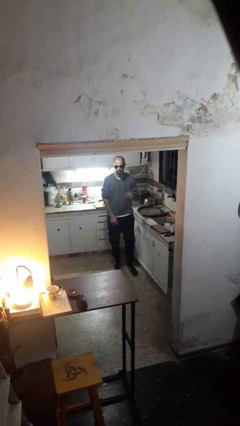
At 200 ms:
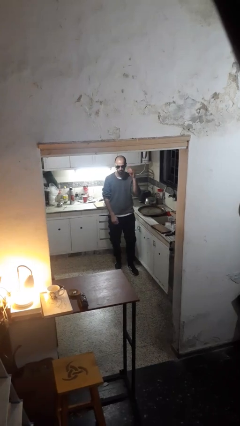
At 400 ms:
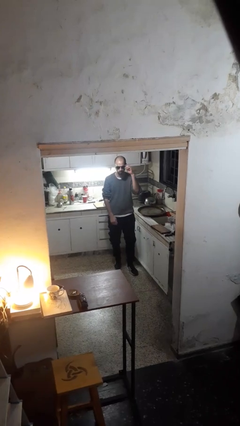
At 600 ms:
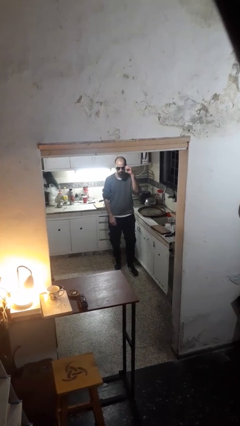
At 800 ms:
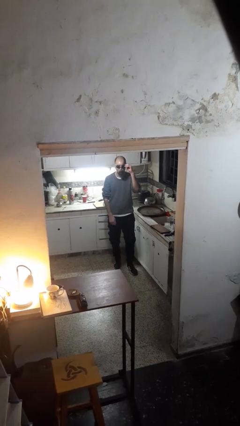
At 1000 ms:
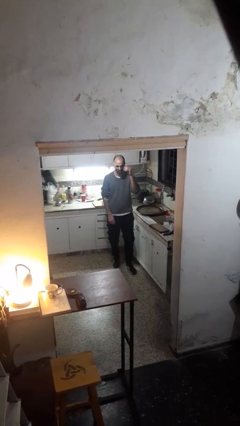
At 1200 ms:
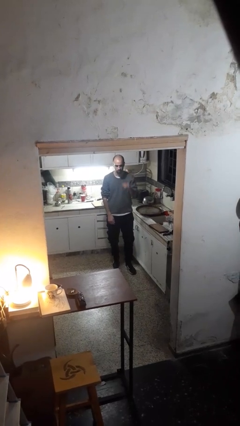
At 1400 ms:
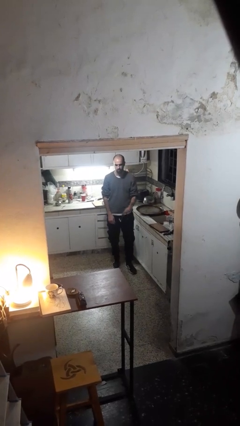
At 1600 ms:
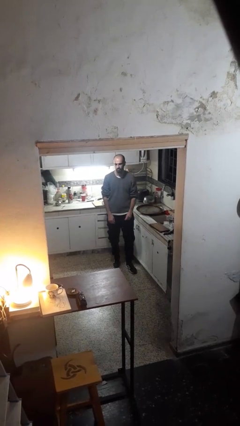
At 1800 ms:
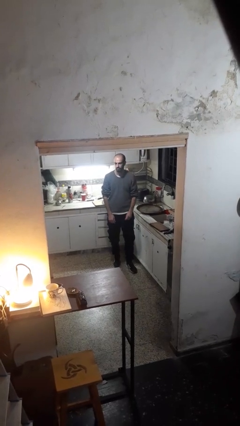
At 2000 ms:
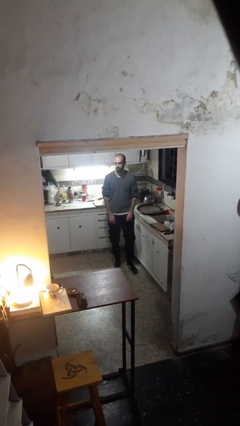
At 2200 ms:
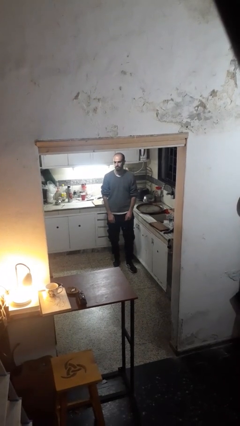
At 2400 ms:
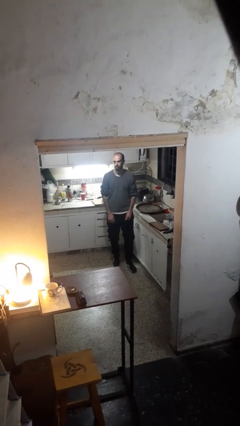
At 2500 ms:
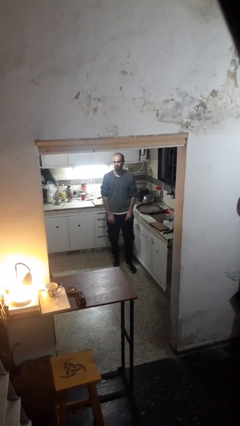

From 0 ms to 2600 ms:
person takes off sunglasses

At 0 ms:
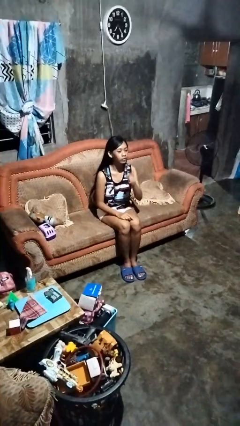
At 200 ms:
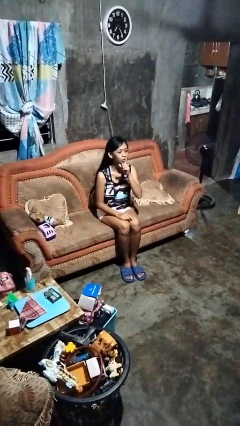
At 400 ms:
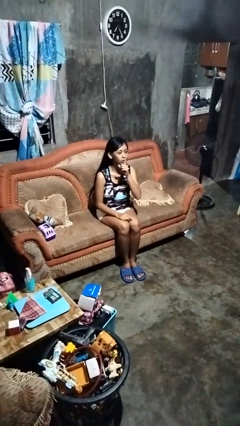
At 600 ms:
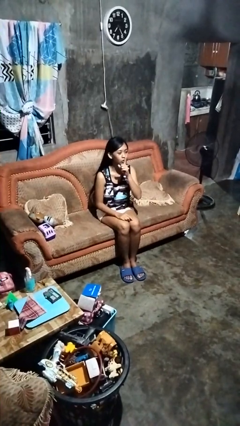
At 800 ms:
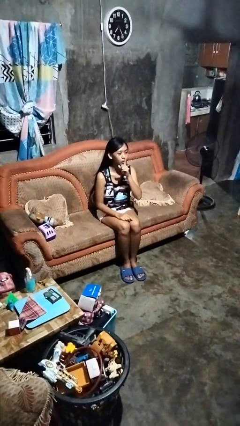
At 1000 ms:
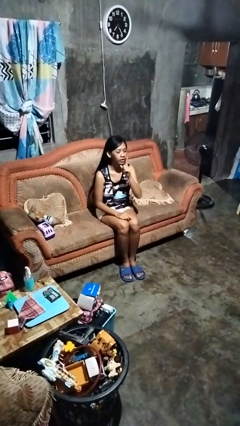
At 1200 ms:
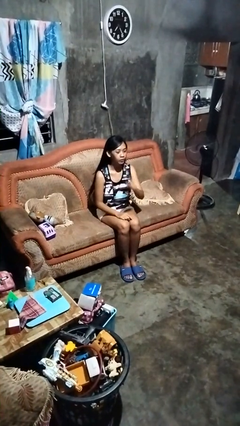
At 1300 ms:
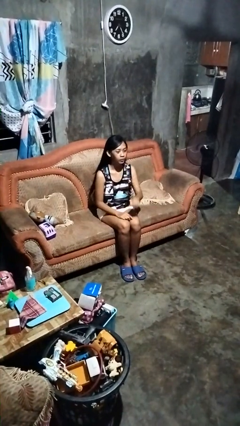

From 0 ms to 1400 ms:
person gestures be quiet

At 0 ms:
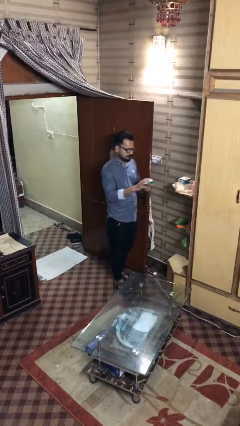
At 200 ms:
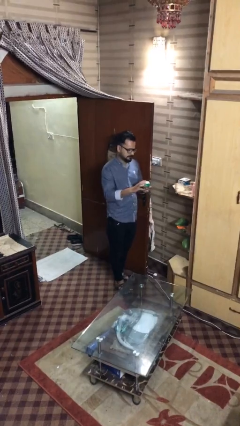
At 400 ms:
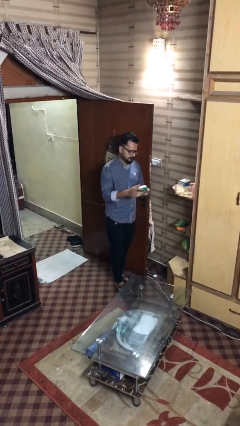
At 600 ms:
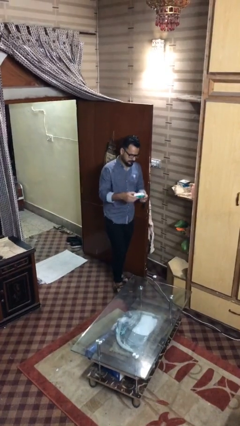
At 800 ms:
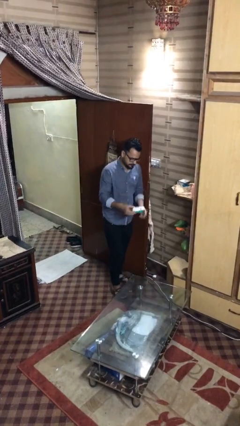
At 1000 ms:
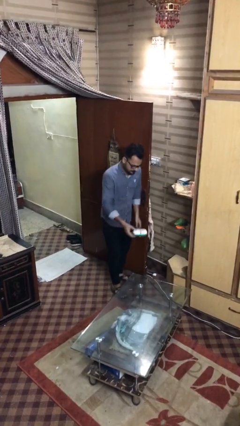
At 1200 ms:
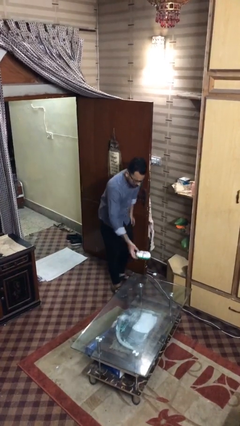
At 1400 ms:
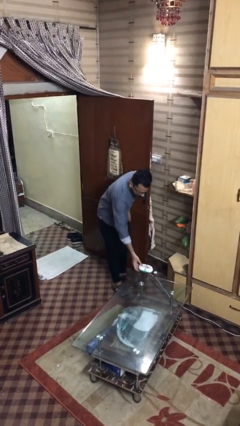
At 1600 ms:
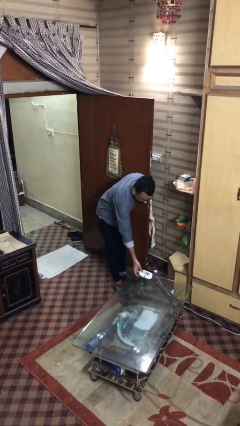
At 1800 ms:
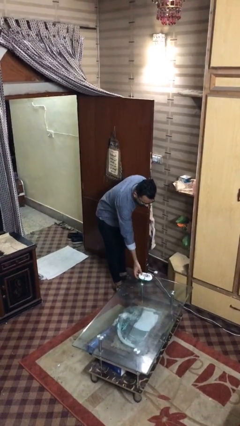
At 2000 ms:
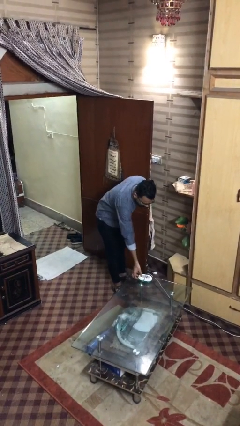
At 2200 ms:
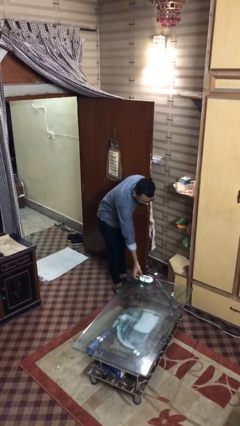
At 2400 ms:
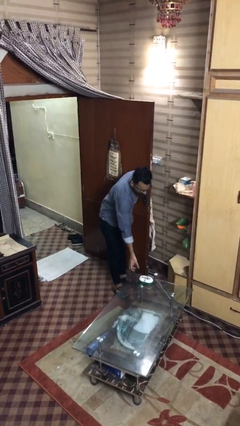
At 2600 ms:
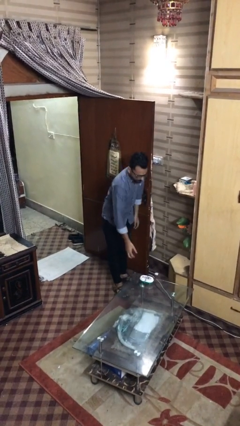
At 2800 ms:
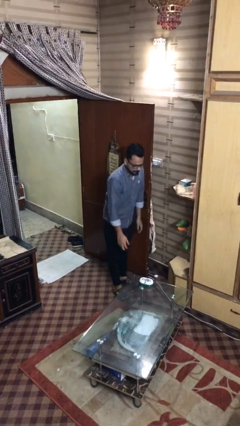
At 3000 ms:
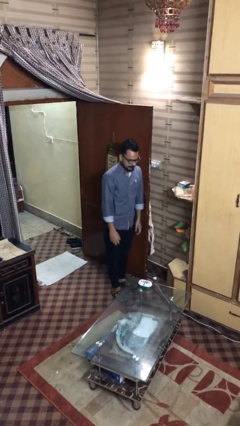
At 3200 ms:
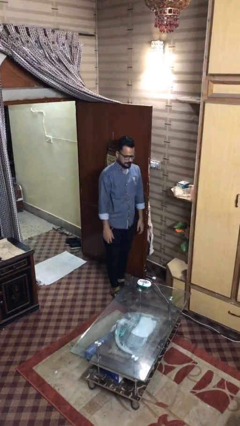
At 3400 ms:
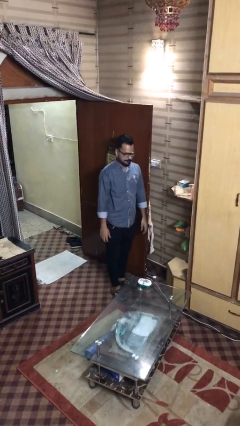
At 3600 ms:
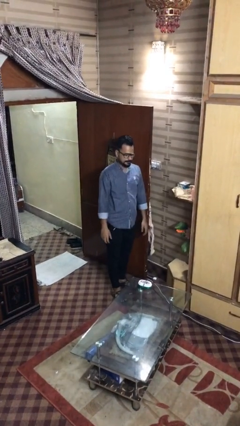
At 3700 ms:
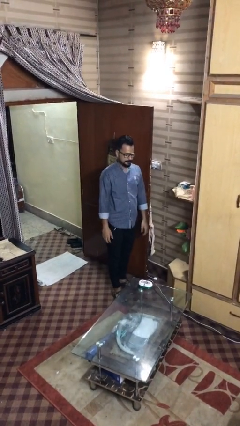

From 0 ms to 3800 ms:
person puts down object on table

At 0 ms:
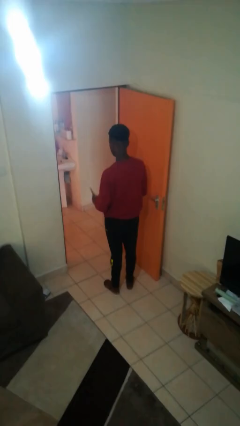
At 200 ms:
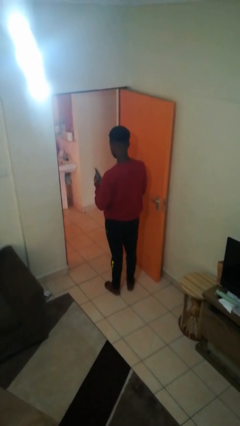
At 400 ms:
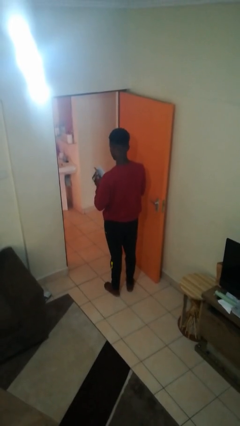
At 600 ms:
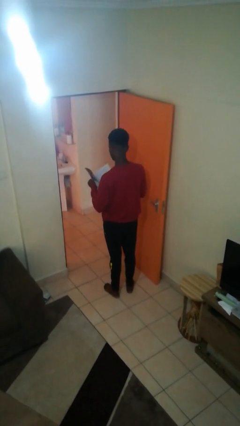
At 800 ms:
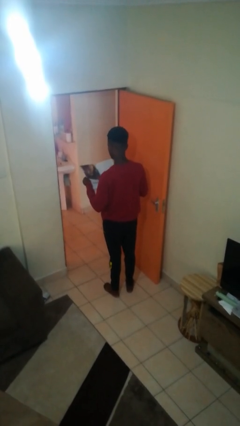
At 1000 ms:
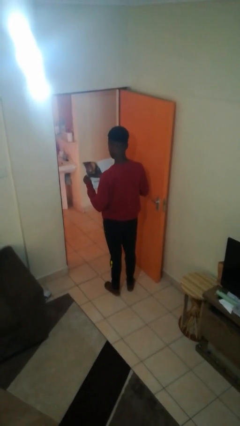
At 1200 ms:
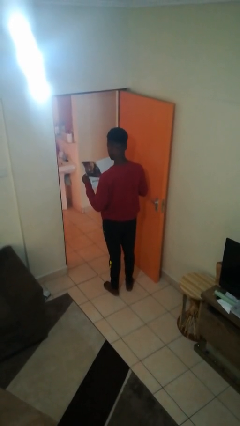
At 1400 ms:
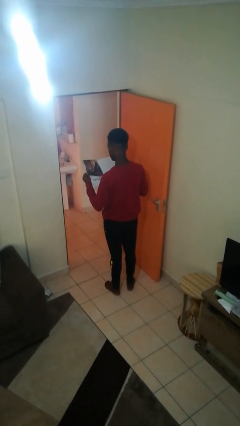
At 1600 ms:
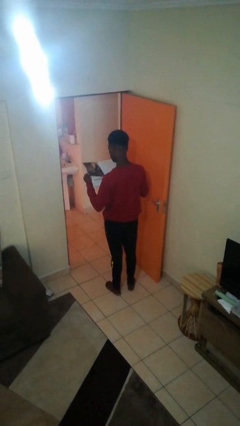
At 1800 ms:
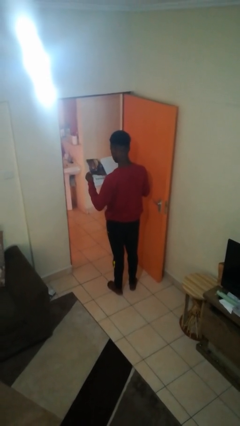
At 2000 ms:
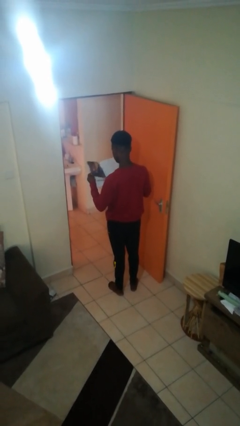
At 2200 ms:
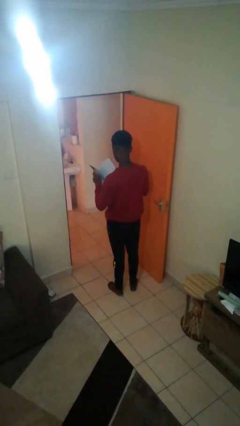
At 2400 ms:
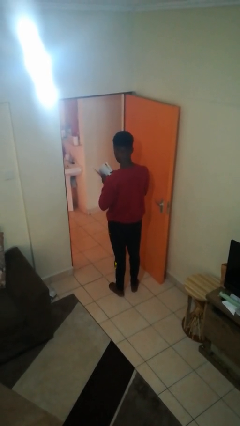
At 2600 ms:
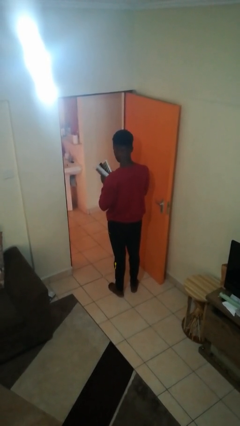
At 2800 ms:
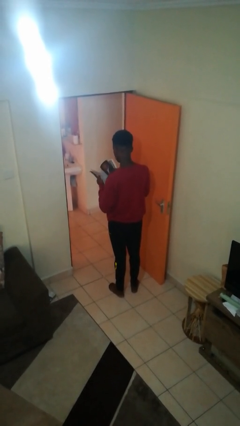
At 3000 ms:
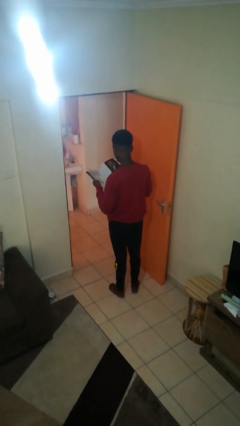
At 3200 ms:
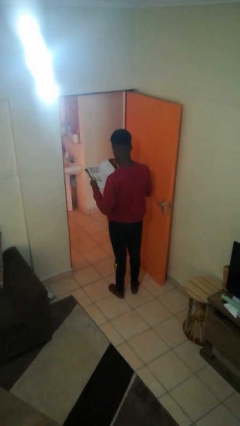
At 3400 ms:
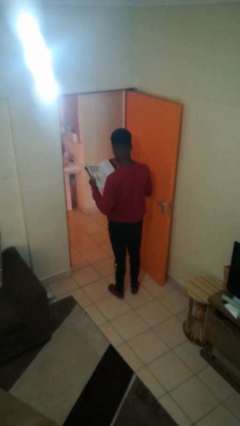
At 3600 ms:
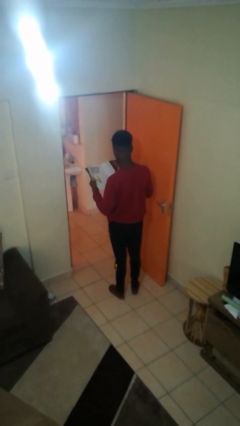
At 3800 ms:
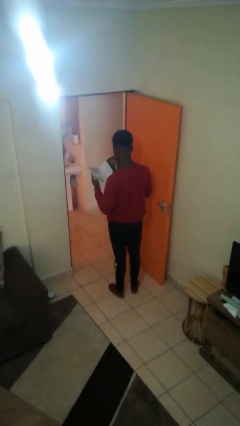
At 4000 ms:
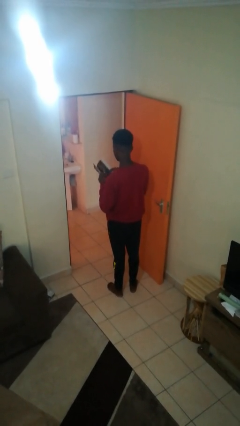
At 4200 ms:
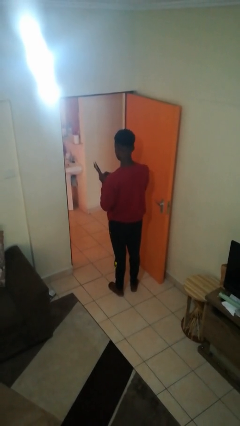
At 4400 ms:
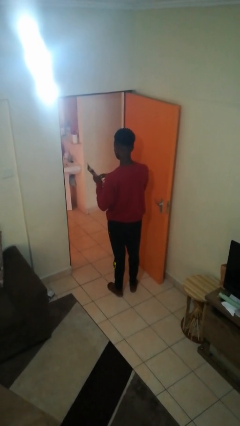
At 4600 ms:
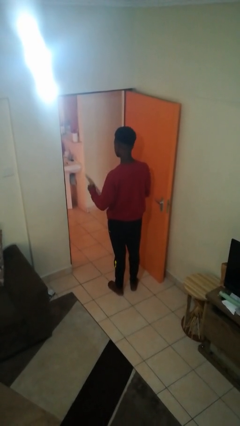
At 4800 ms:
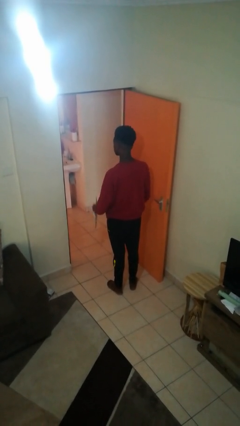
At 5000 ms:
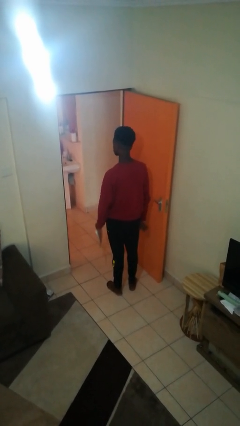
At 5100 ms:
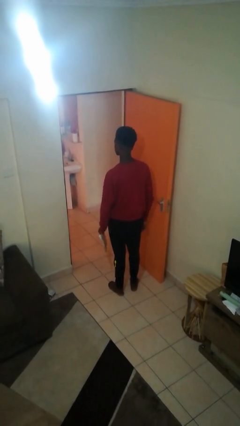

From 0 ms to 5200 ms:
person reads magazine

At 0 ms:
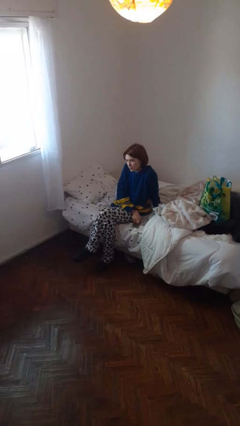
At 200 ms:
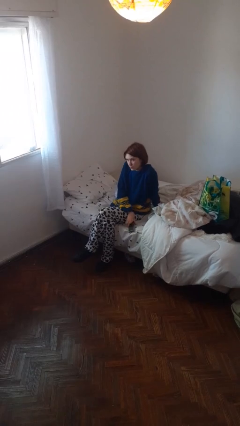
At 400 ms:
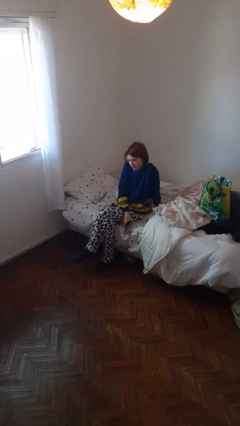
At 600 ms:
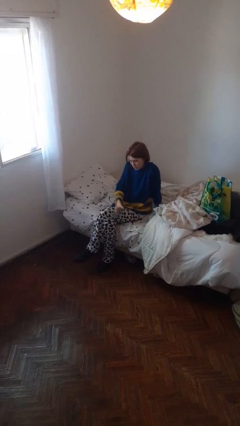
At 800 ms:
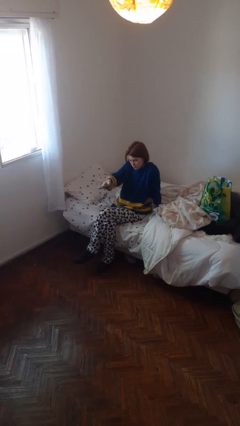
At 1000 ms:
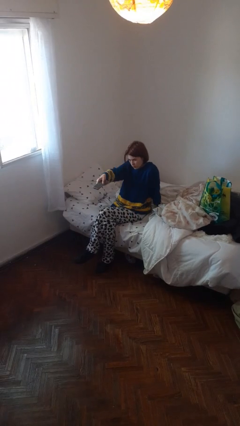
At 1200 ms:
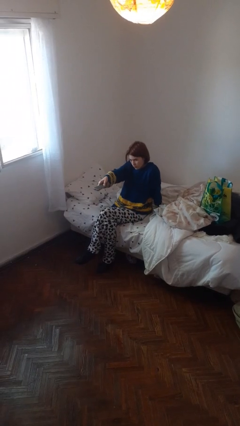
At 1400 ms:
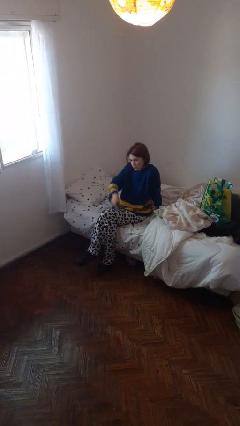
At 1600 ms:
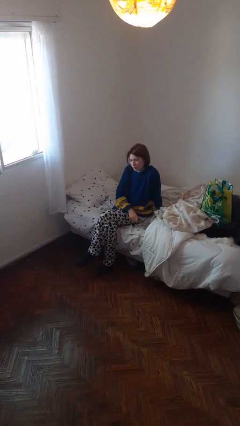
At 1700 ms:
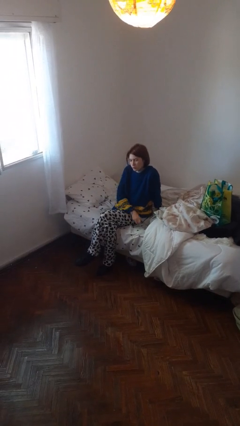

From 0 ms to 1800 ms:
person uses television remote

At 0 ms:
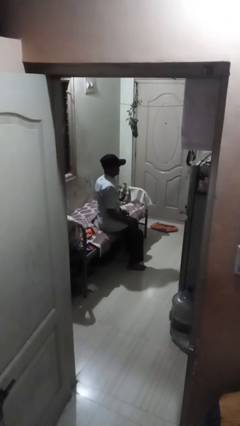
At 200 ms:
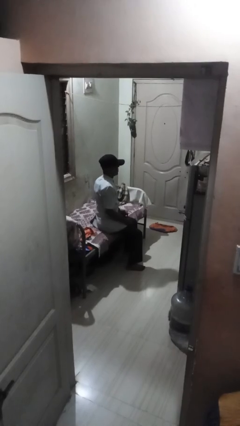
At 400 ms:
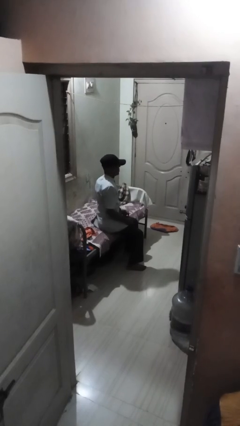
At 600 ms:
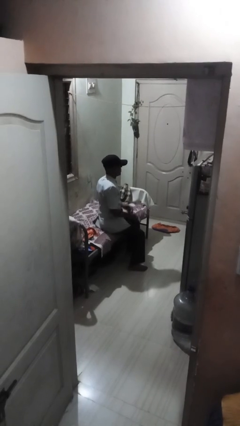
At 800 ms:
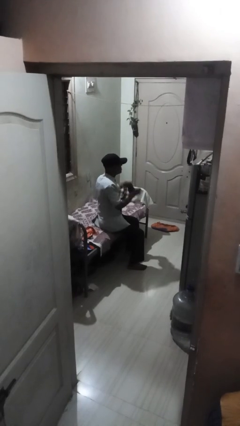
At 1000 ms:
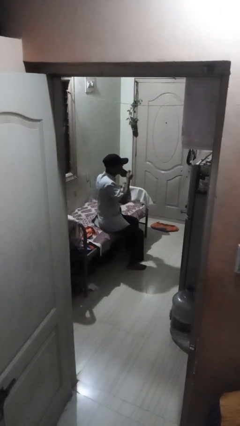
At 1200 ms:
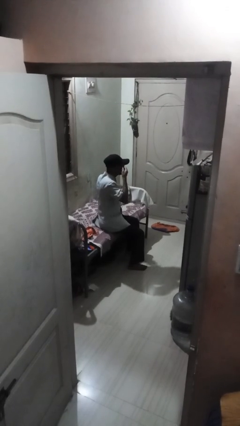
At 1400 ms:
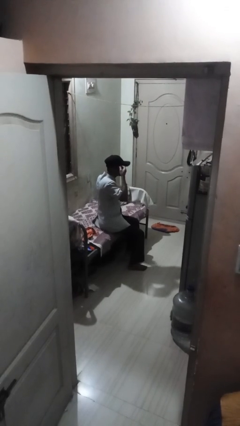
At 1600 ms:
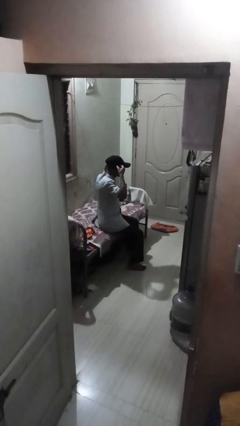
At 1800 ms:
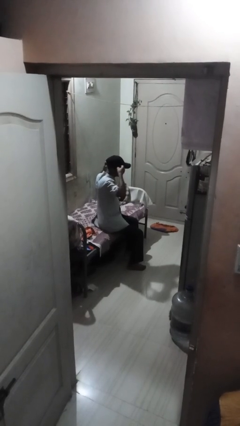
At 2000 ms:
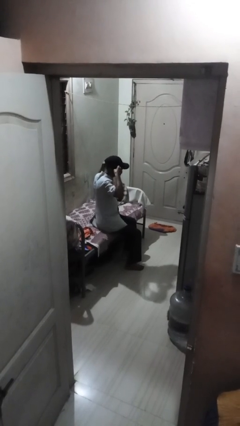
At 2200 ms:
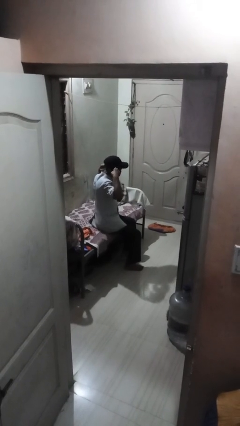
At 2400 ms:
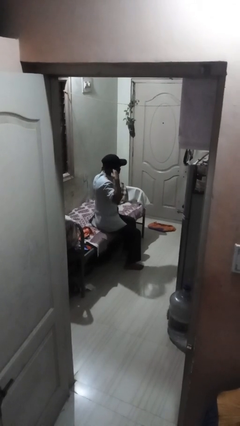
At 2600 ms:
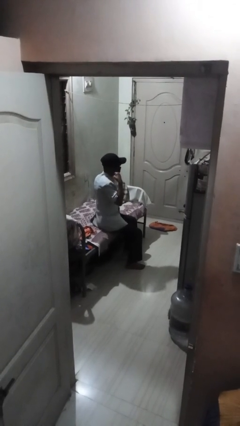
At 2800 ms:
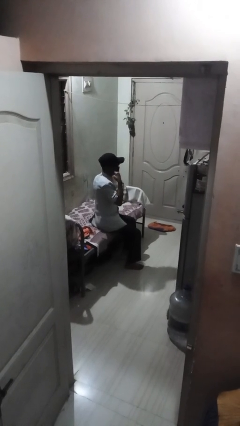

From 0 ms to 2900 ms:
person puts on facemask
